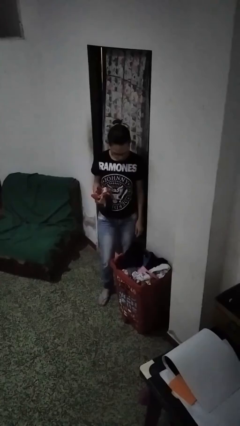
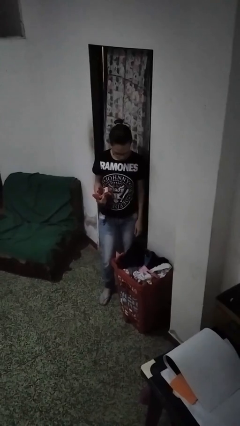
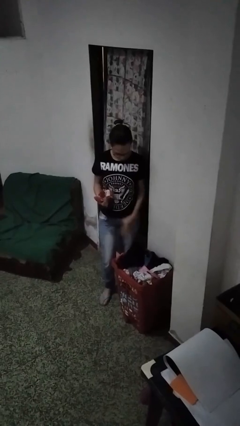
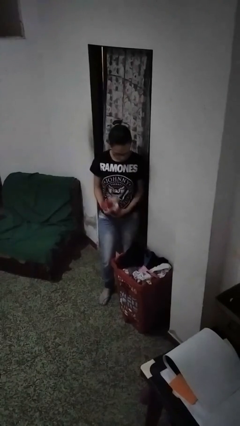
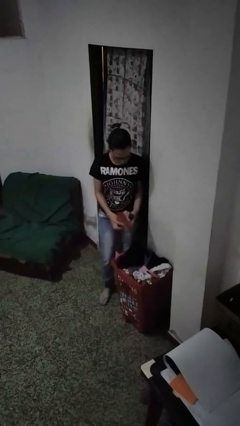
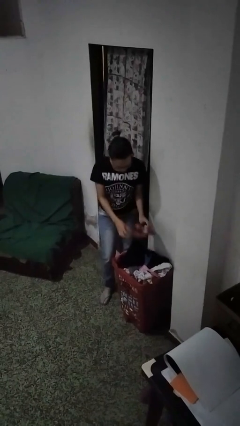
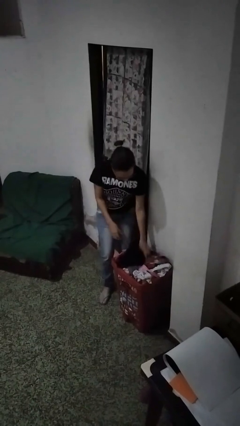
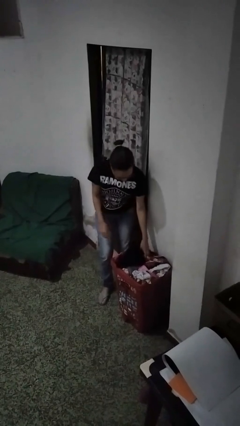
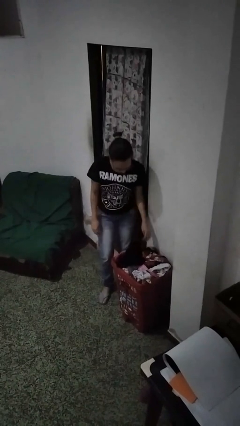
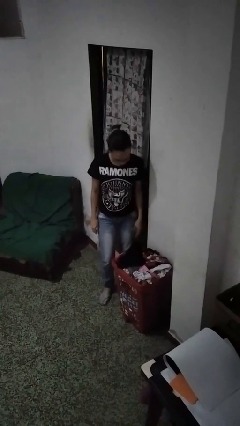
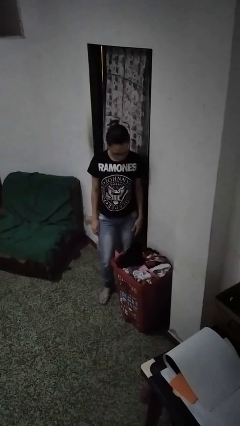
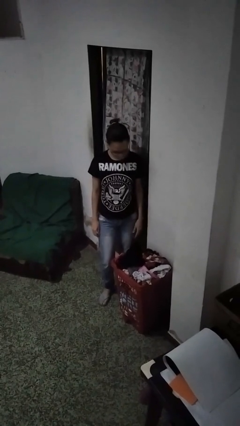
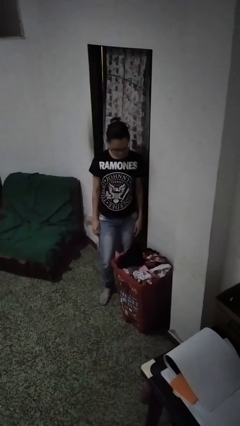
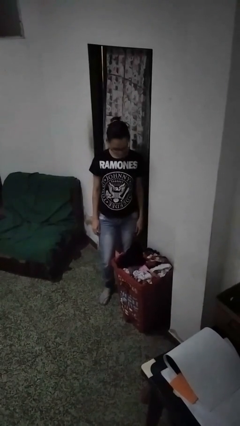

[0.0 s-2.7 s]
person puts object into basket

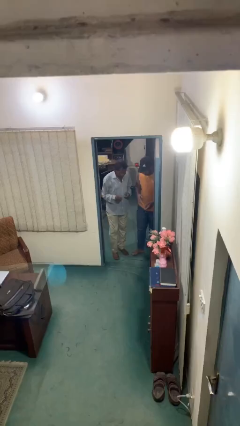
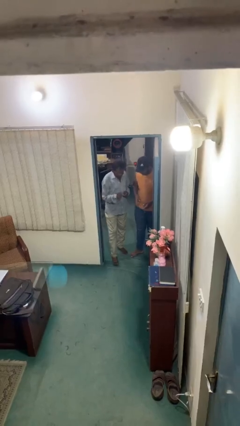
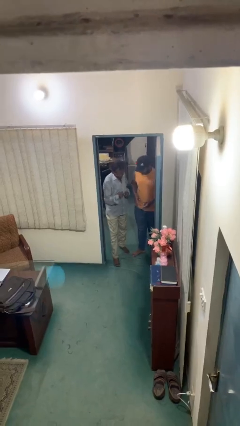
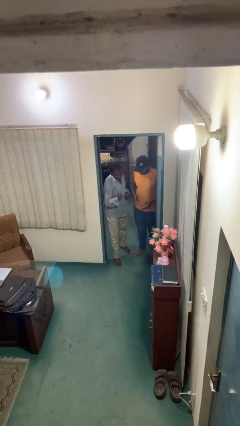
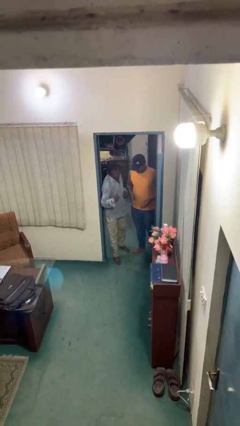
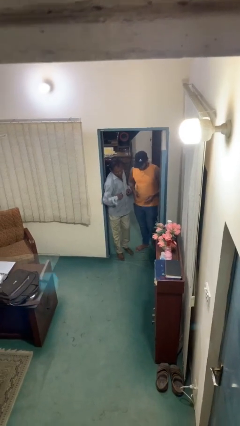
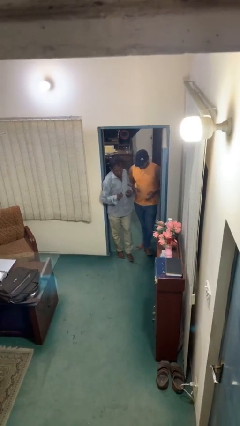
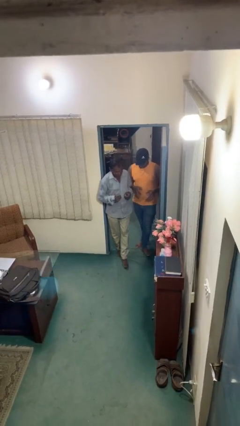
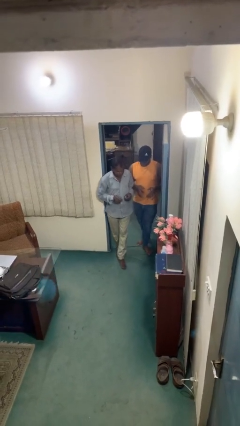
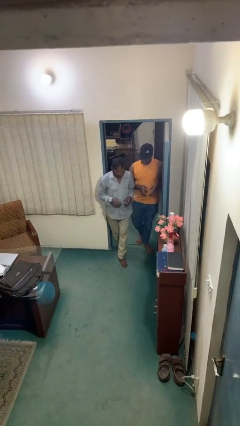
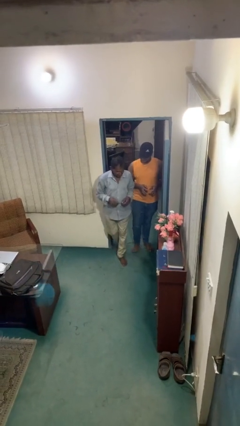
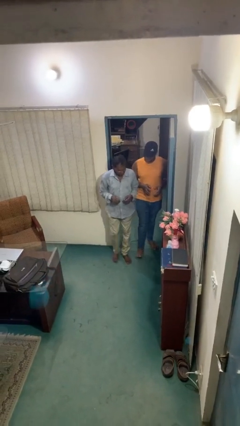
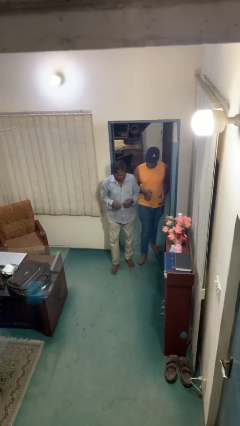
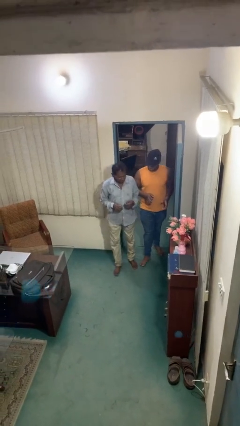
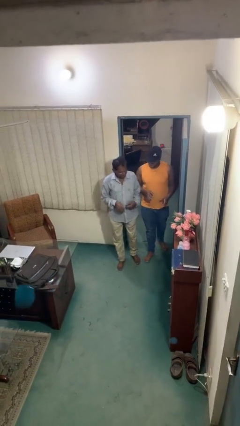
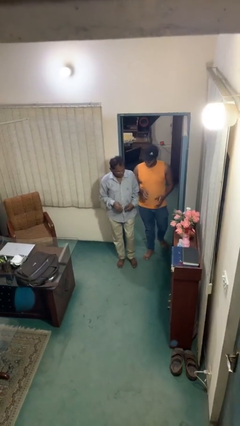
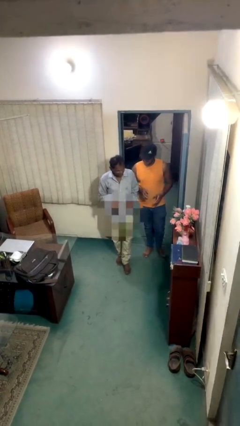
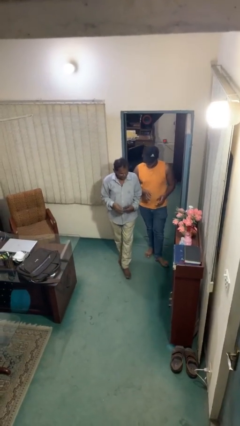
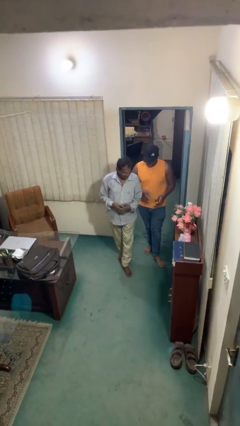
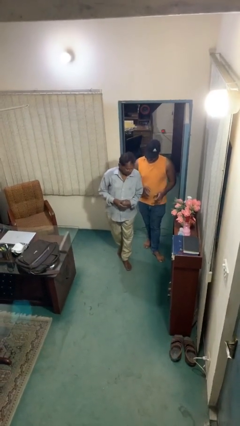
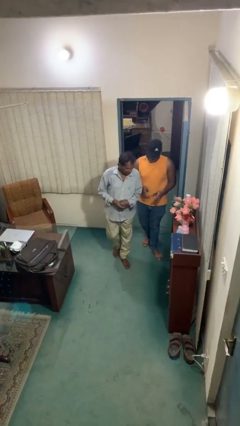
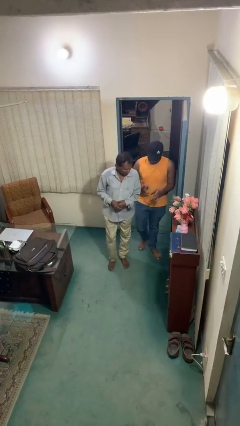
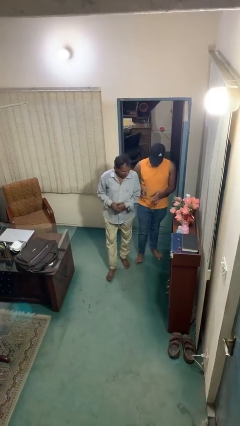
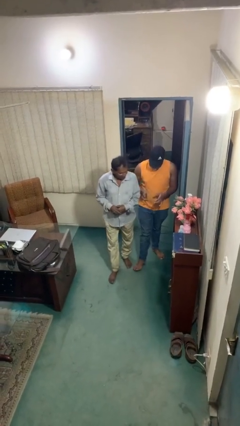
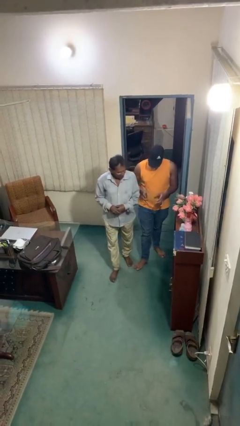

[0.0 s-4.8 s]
person talks to person

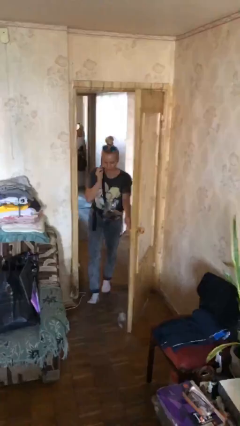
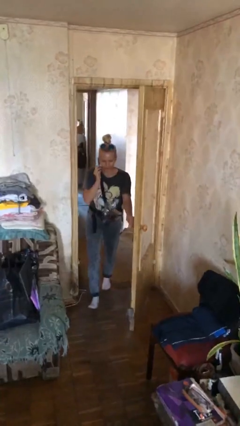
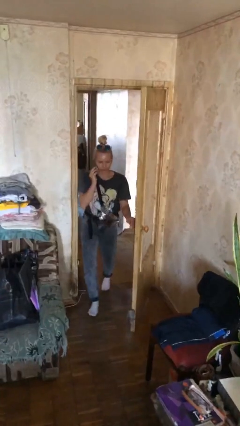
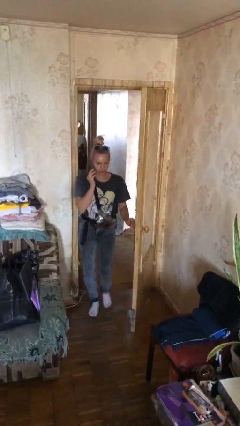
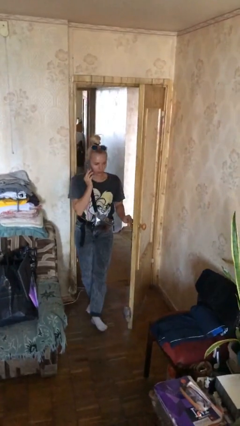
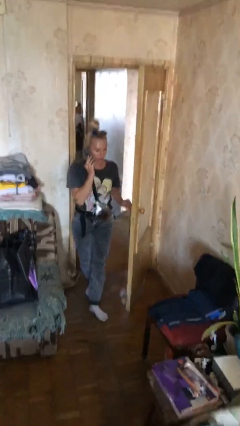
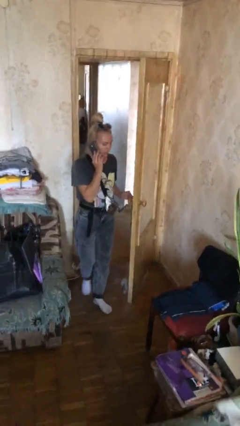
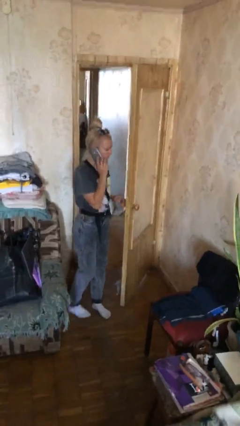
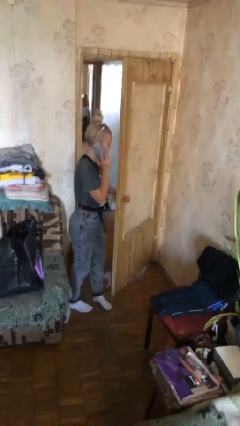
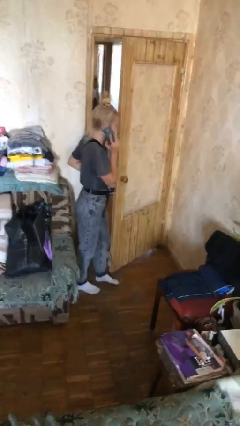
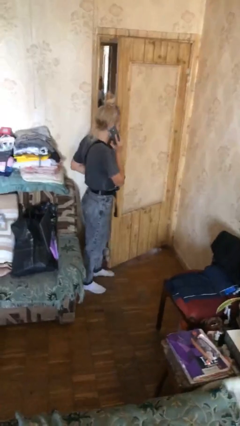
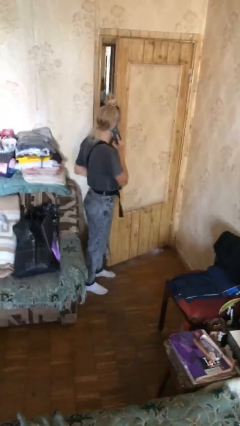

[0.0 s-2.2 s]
person enters scene through structure

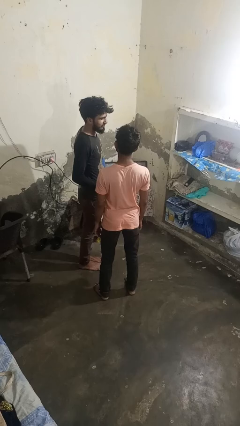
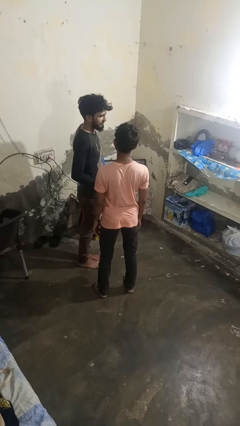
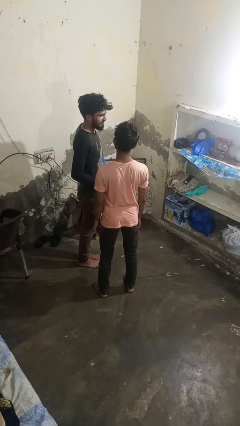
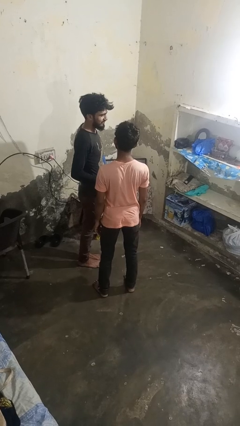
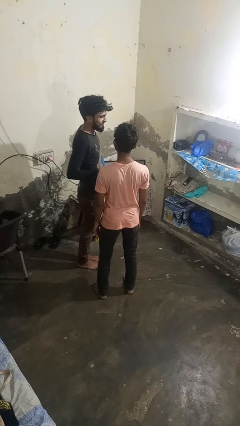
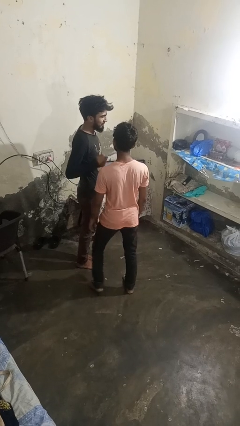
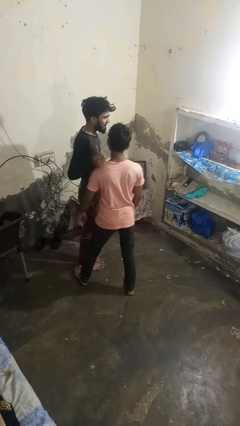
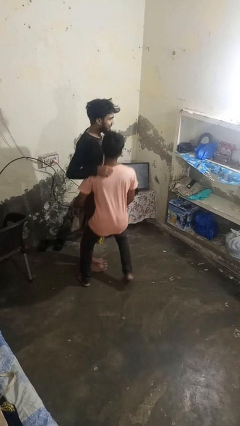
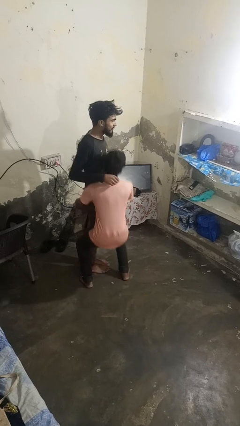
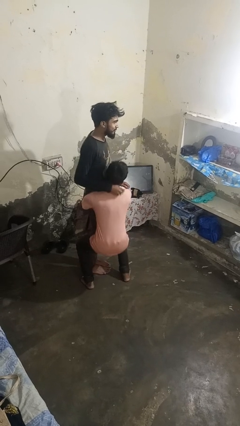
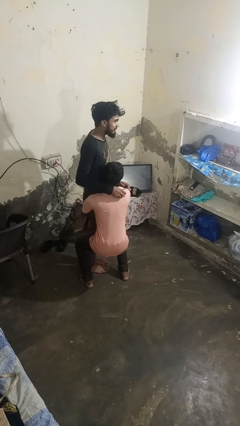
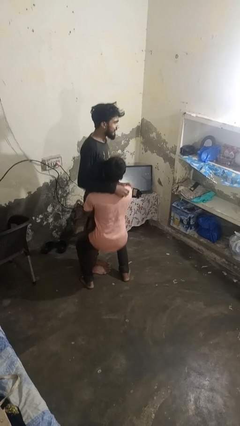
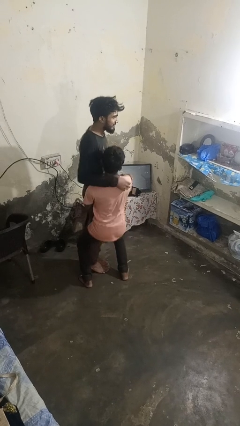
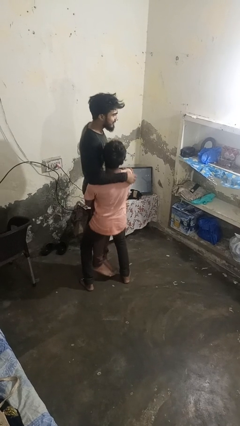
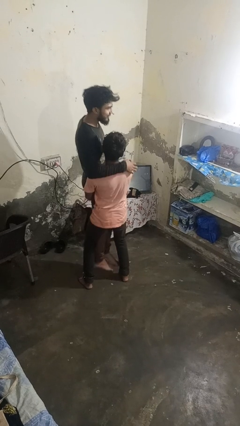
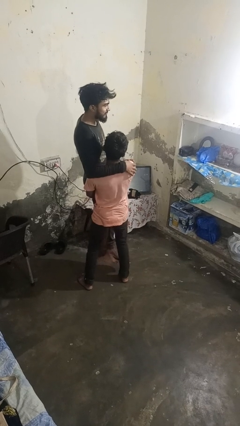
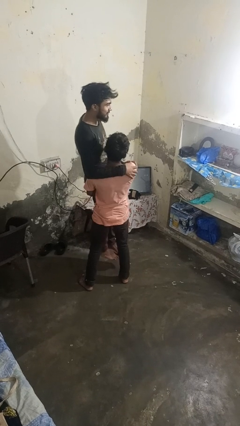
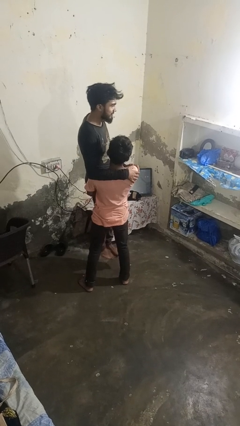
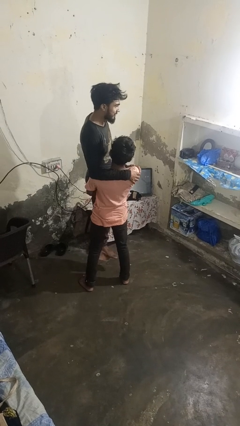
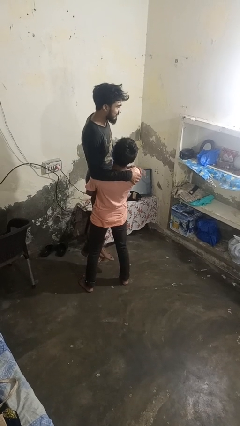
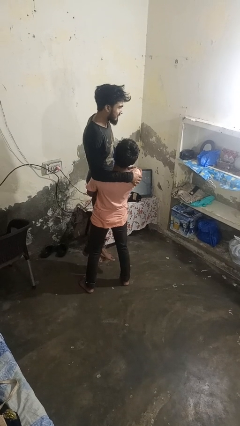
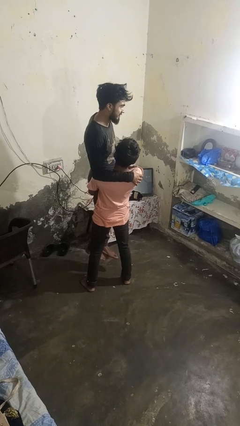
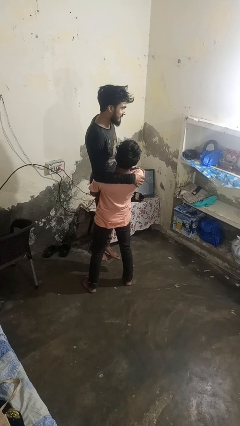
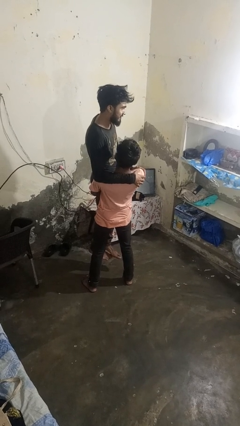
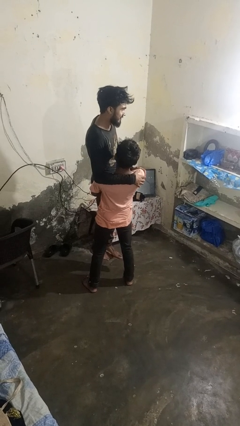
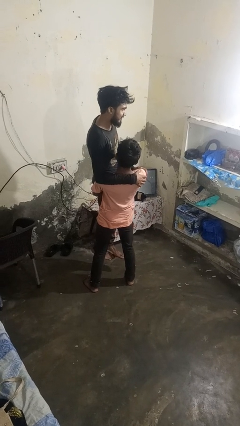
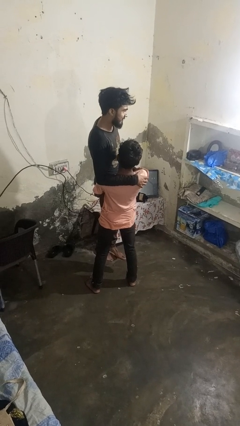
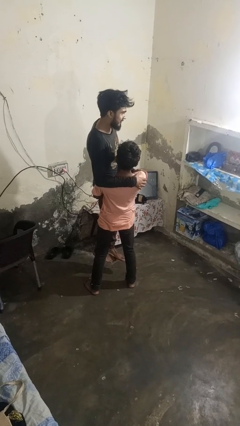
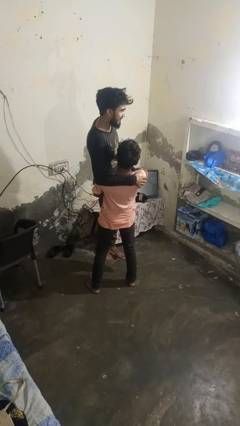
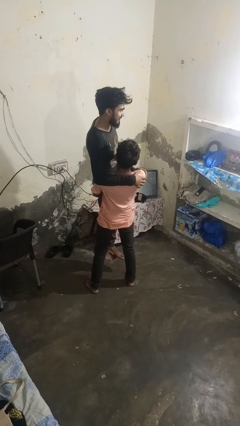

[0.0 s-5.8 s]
person picks up person

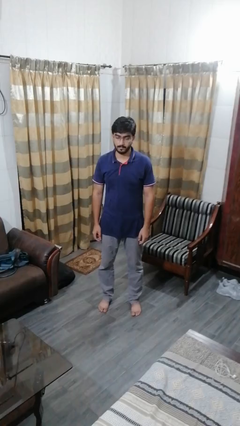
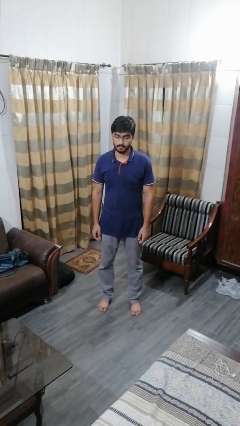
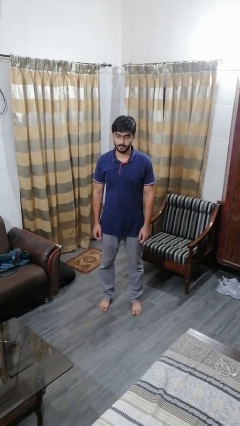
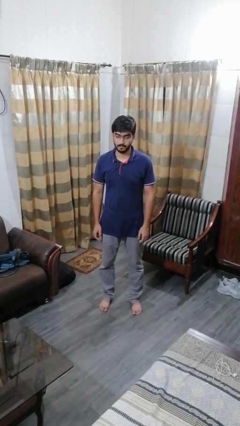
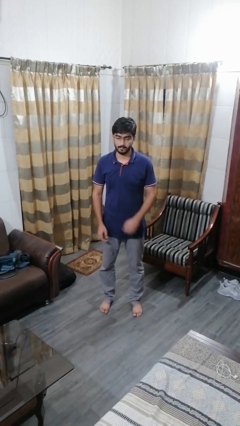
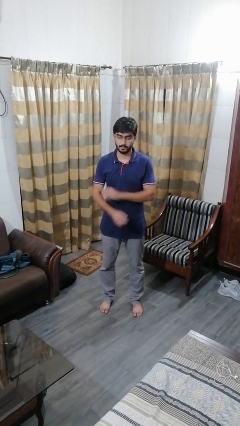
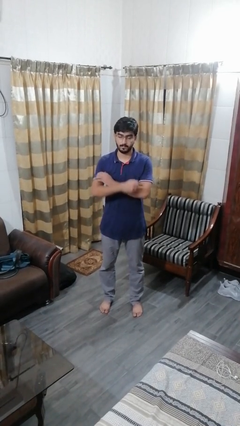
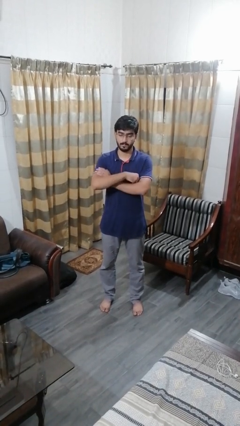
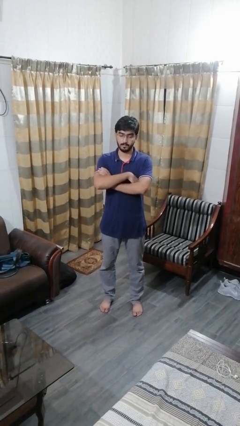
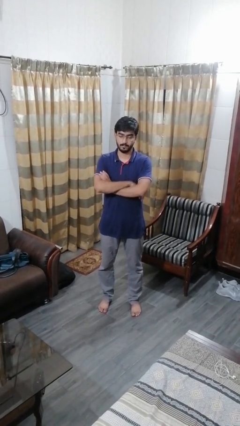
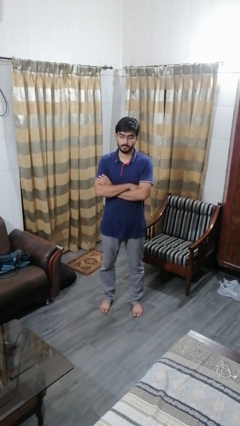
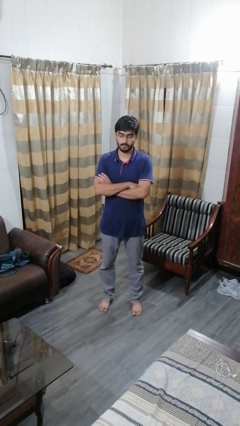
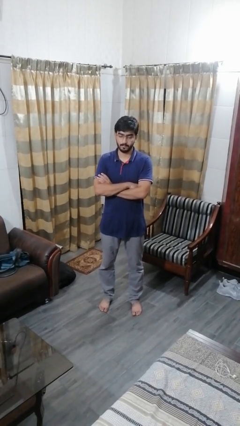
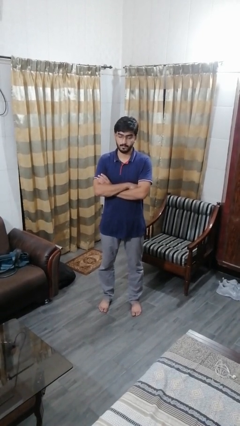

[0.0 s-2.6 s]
person crosses arms
